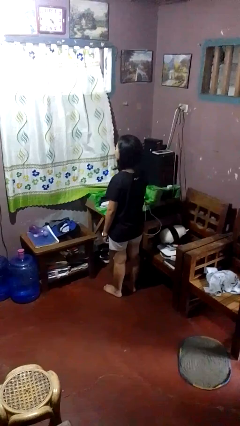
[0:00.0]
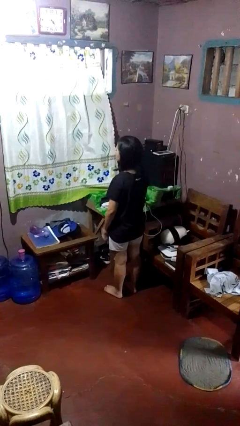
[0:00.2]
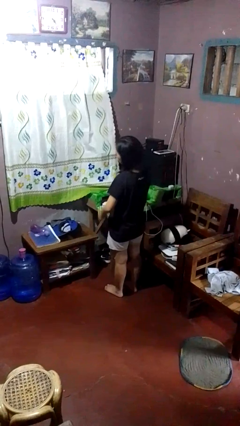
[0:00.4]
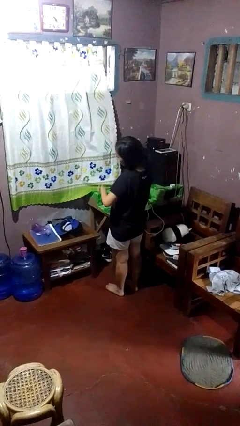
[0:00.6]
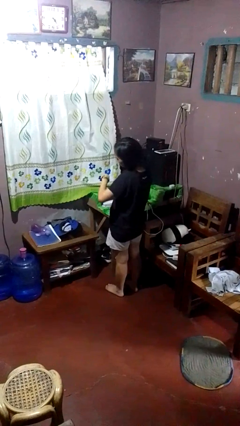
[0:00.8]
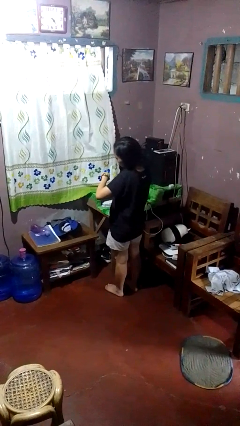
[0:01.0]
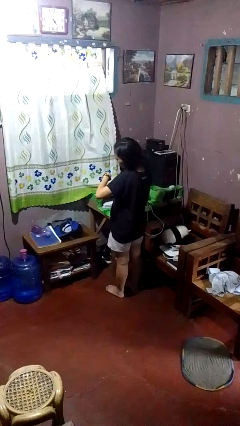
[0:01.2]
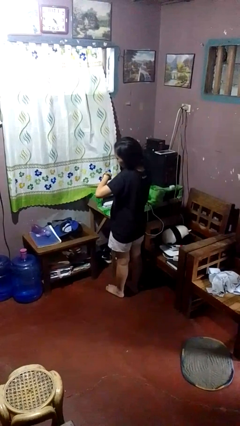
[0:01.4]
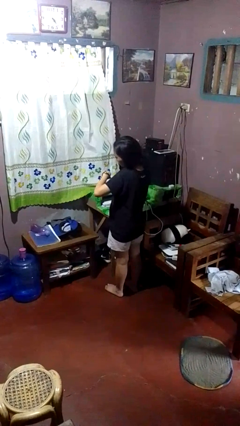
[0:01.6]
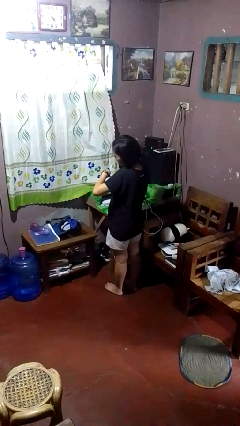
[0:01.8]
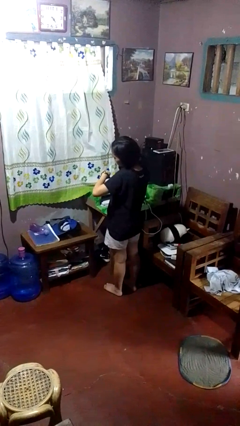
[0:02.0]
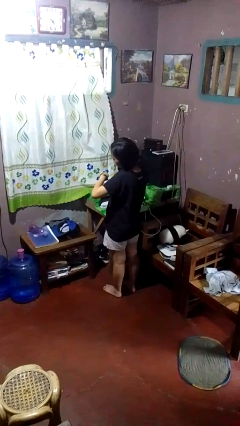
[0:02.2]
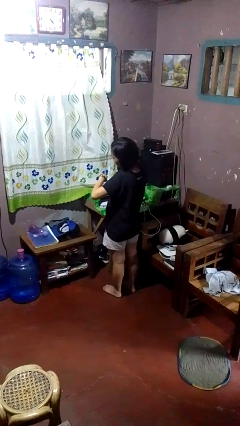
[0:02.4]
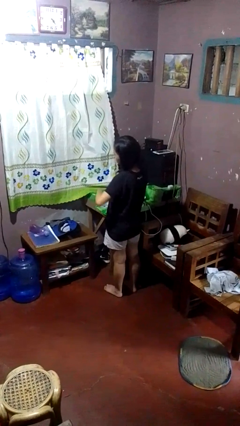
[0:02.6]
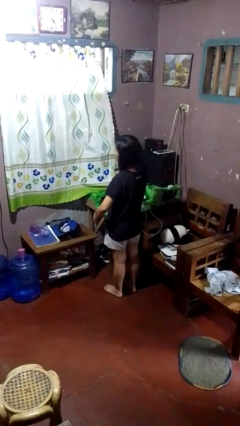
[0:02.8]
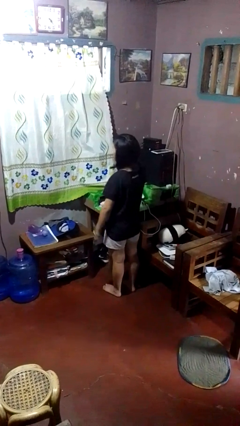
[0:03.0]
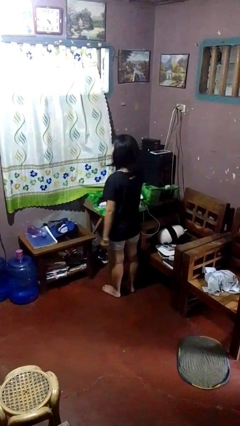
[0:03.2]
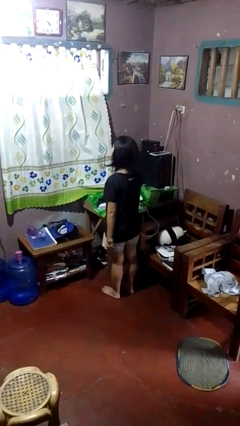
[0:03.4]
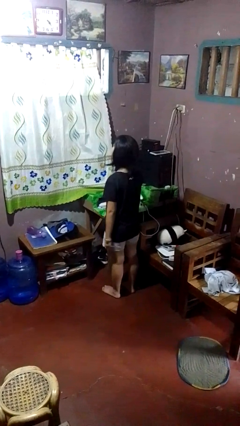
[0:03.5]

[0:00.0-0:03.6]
person looks at wristwatch

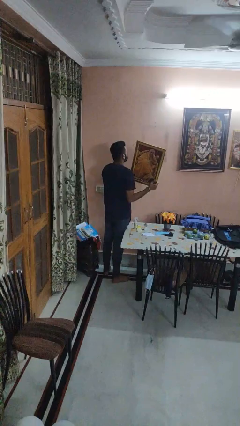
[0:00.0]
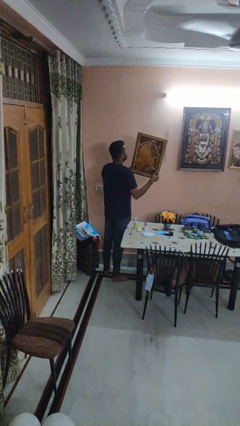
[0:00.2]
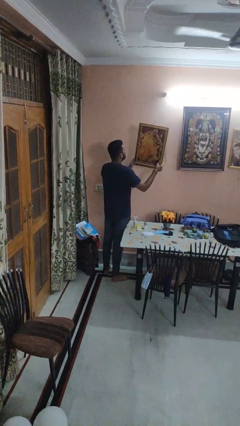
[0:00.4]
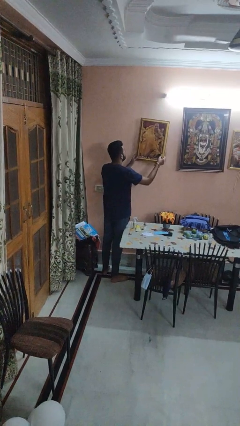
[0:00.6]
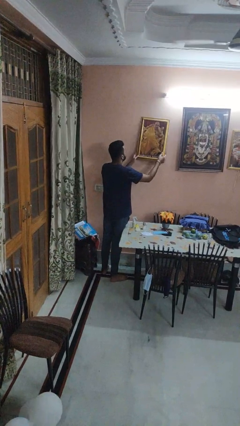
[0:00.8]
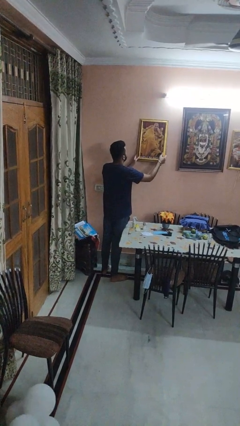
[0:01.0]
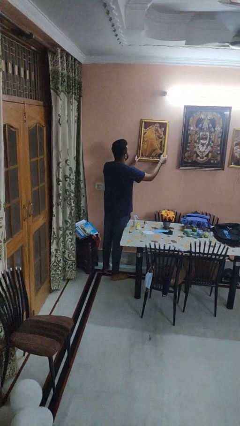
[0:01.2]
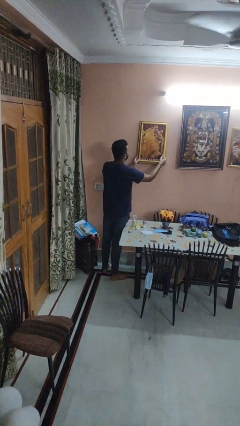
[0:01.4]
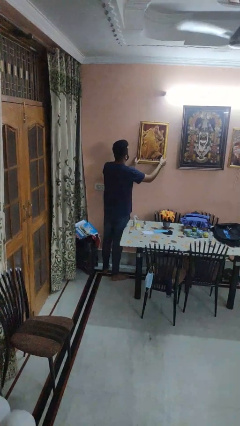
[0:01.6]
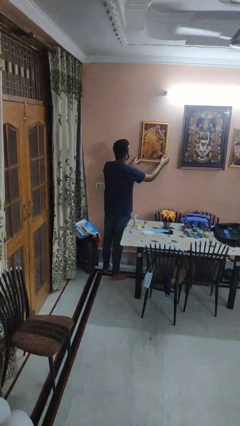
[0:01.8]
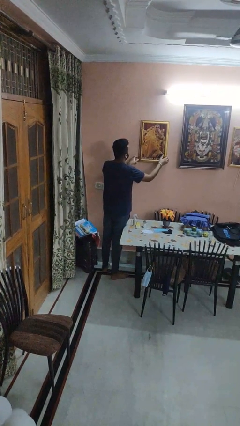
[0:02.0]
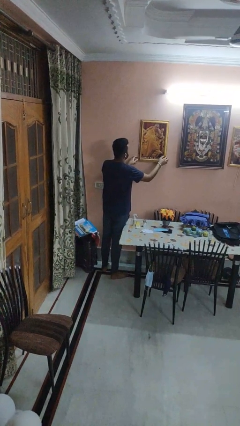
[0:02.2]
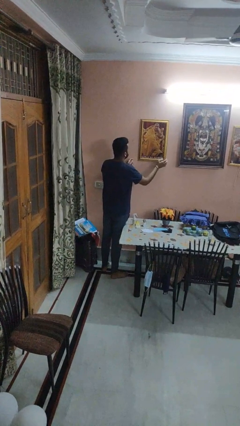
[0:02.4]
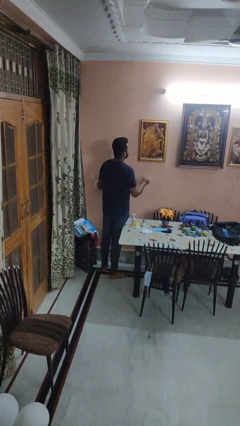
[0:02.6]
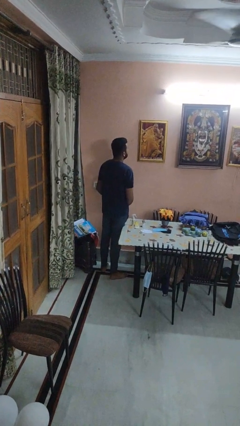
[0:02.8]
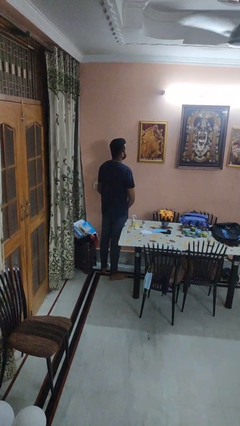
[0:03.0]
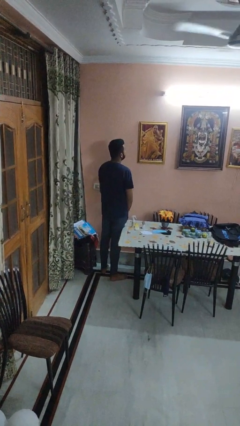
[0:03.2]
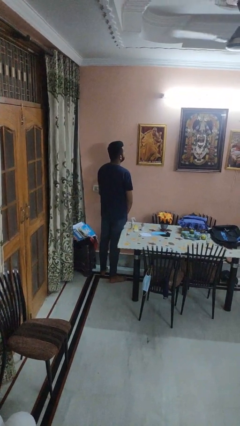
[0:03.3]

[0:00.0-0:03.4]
person puts up picture frame

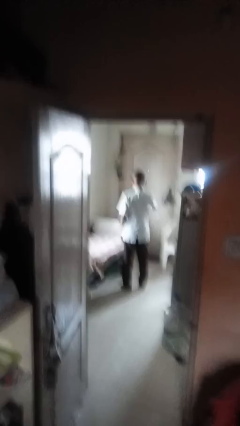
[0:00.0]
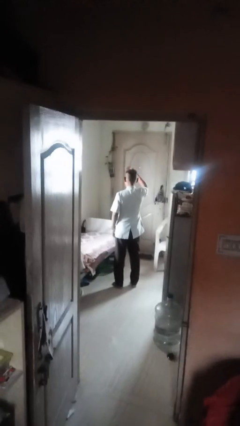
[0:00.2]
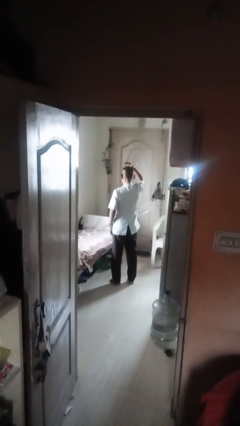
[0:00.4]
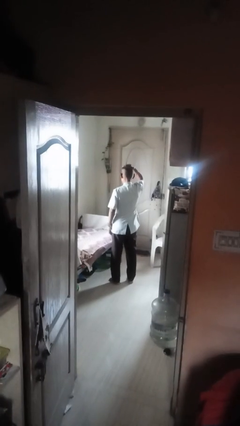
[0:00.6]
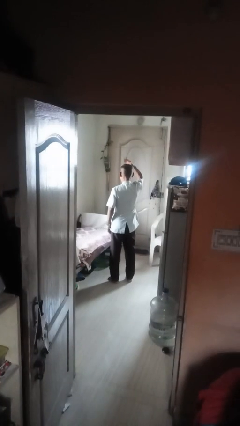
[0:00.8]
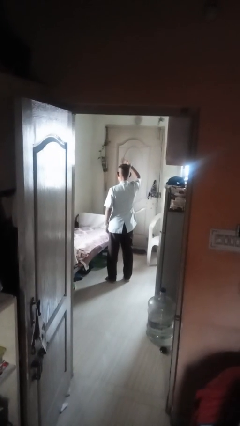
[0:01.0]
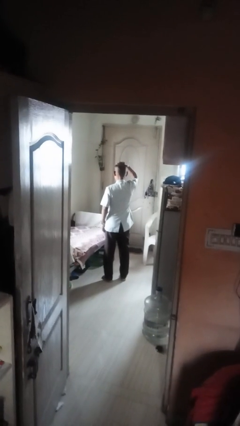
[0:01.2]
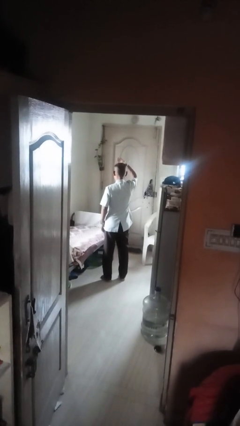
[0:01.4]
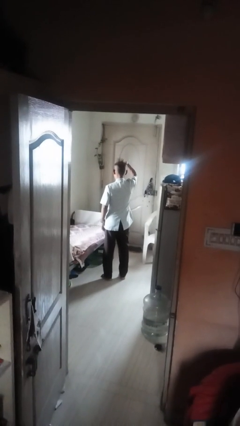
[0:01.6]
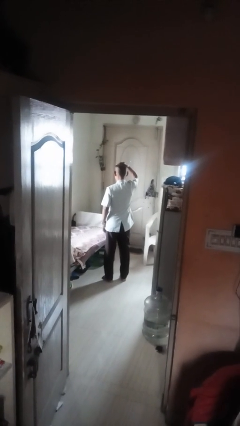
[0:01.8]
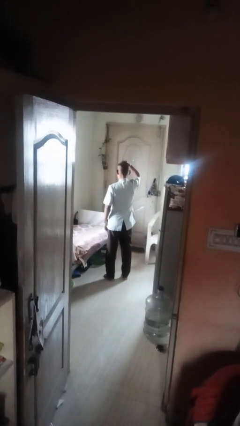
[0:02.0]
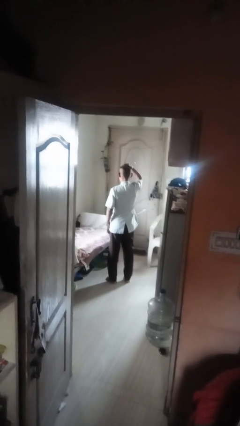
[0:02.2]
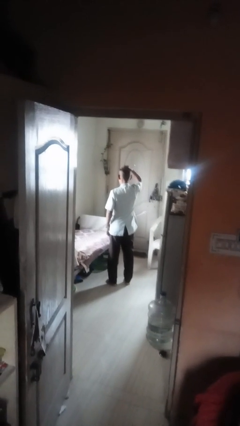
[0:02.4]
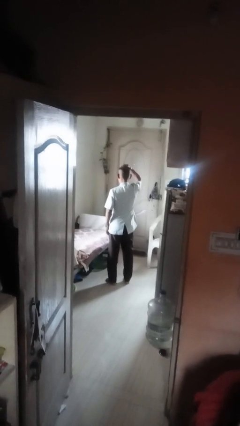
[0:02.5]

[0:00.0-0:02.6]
person pats head

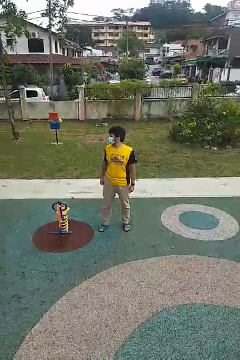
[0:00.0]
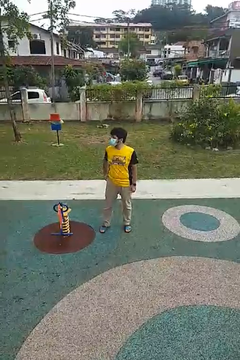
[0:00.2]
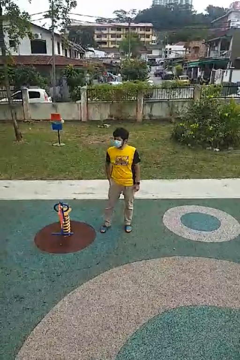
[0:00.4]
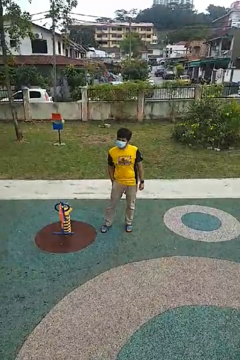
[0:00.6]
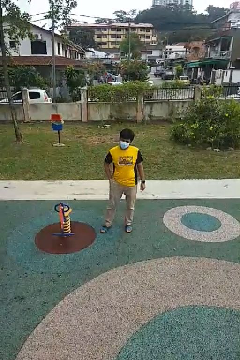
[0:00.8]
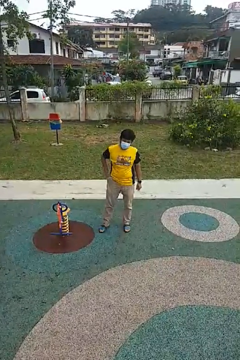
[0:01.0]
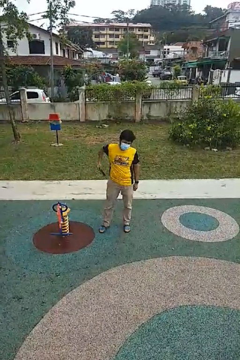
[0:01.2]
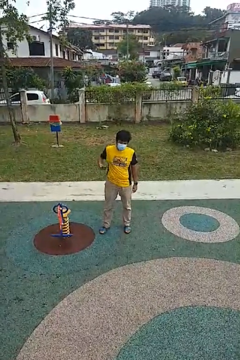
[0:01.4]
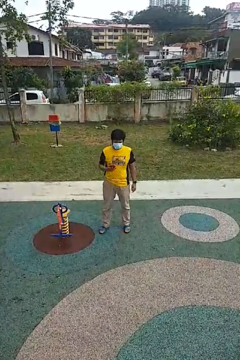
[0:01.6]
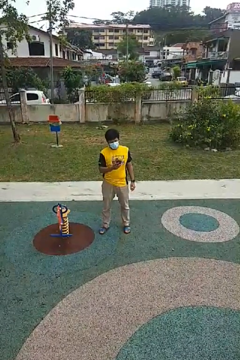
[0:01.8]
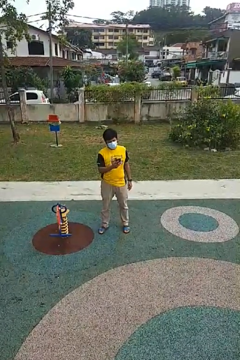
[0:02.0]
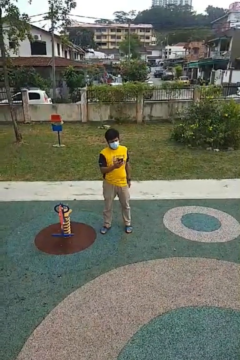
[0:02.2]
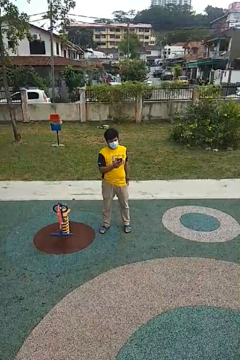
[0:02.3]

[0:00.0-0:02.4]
person takes phone from pocket

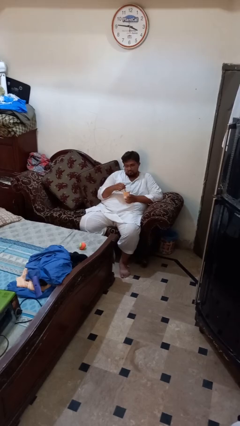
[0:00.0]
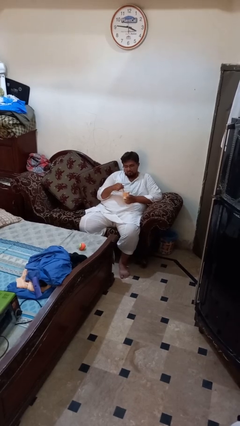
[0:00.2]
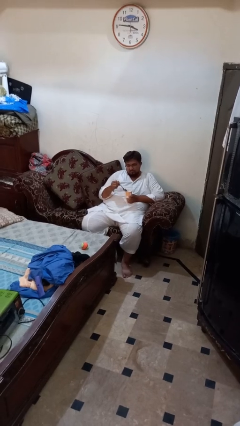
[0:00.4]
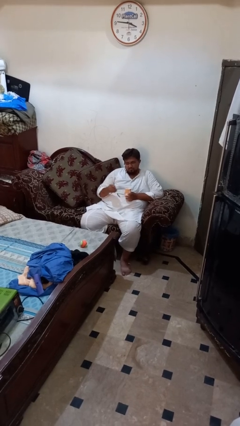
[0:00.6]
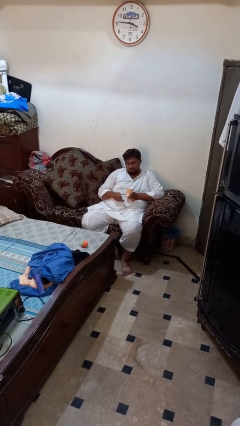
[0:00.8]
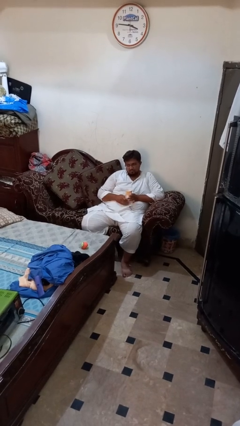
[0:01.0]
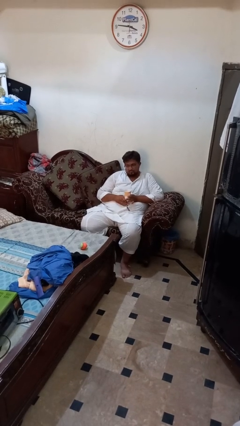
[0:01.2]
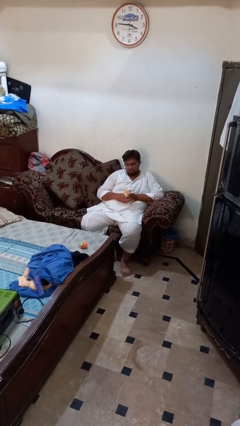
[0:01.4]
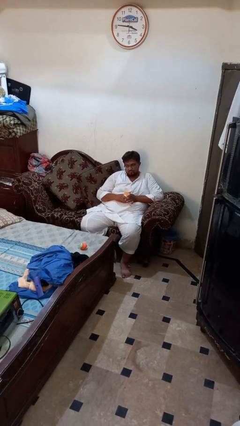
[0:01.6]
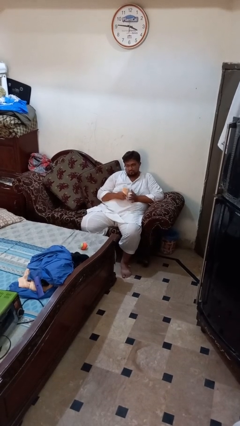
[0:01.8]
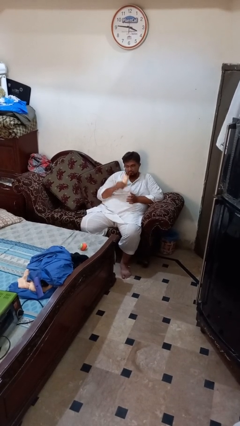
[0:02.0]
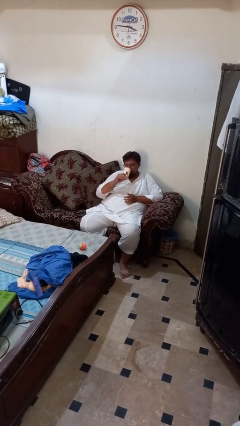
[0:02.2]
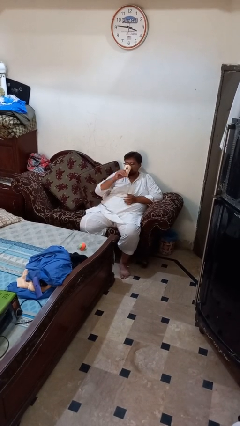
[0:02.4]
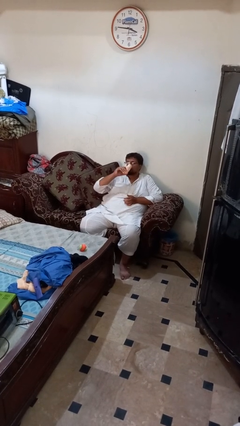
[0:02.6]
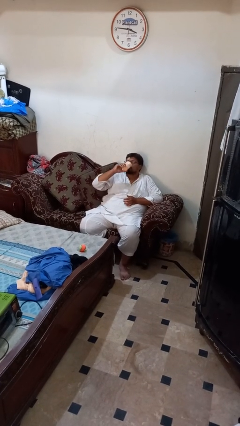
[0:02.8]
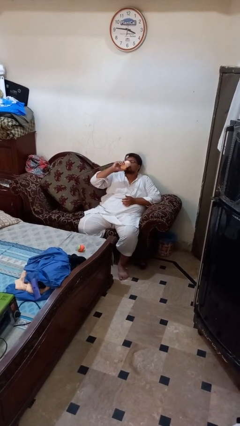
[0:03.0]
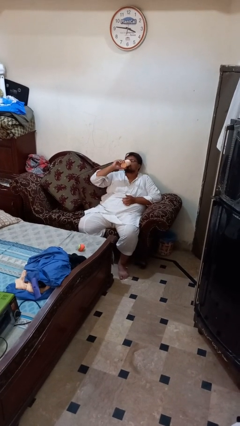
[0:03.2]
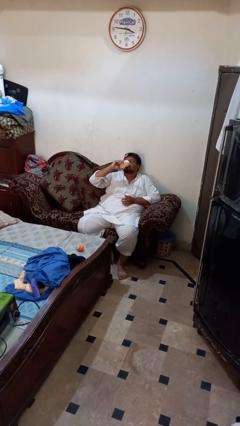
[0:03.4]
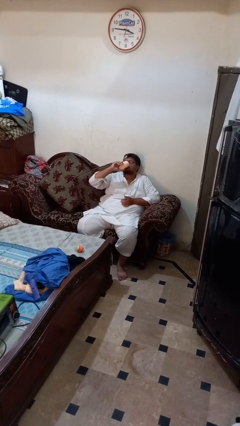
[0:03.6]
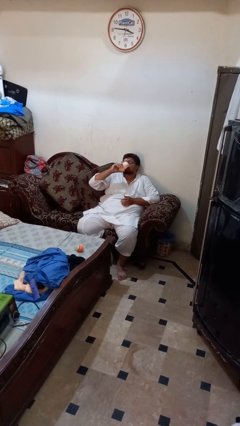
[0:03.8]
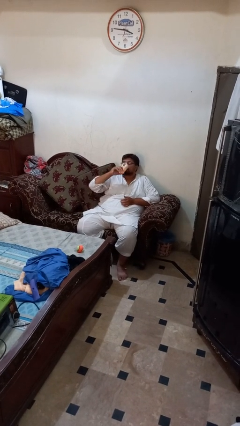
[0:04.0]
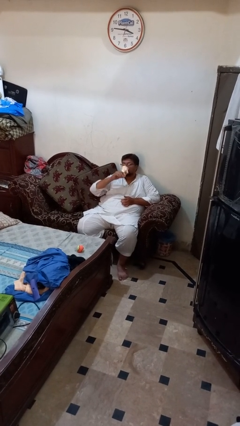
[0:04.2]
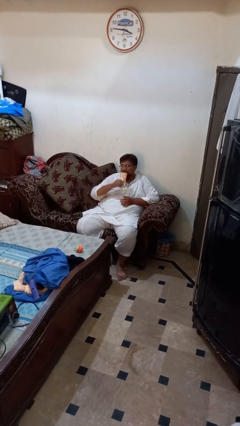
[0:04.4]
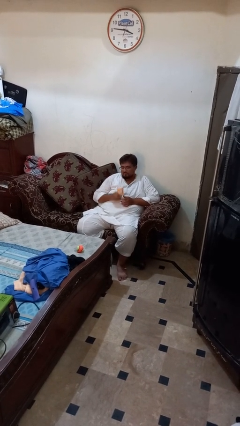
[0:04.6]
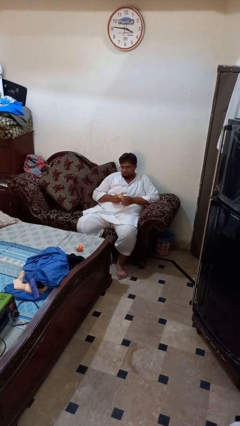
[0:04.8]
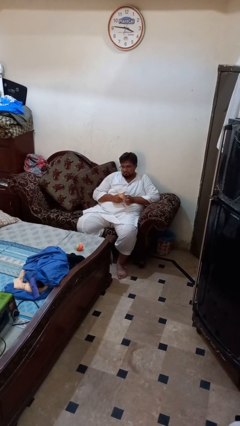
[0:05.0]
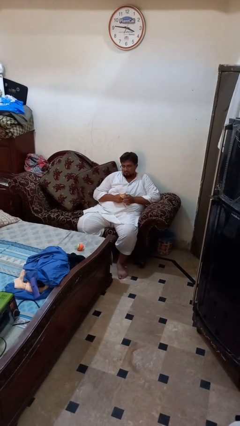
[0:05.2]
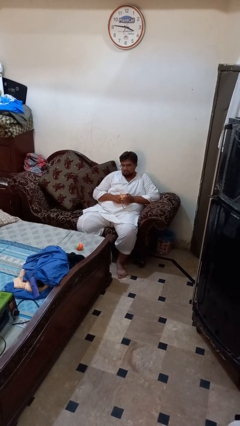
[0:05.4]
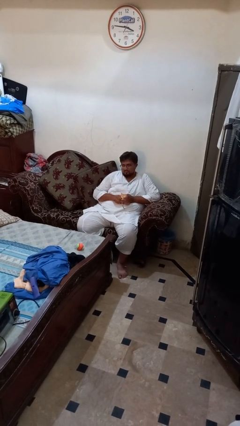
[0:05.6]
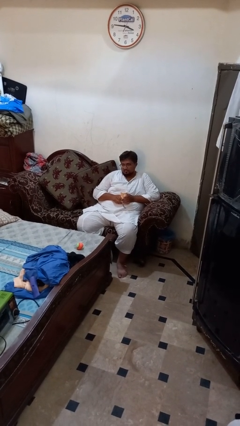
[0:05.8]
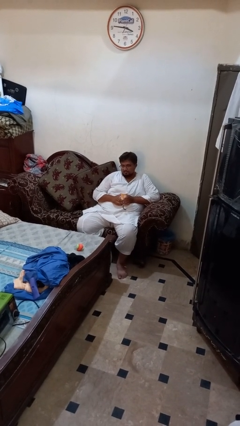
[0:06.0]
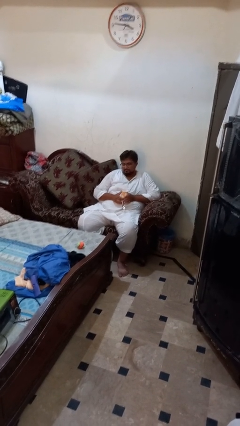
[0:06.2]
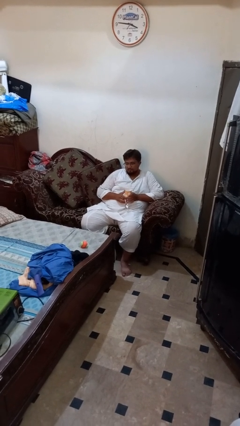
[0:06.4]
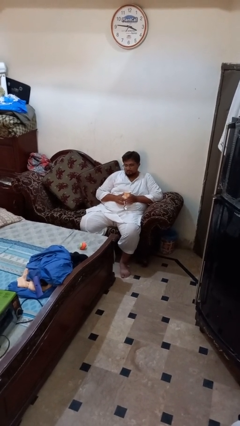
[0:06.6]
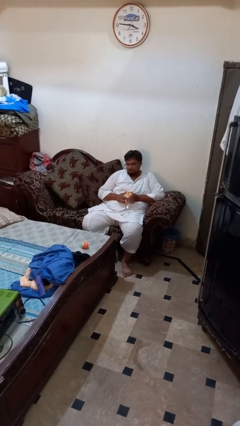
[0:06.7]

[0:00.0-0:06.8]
person drinks from mug
